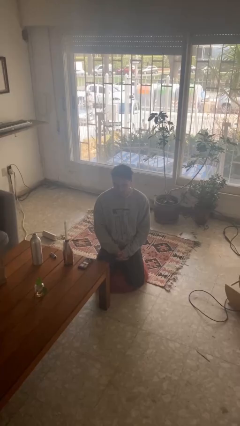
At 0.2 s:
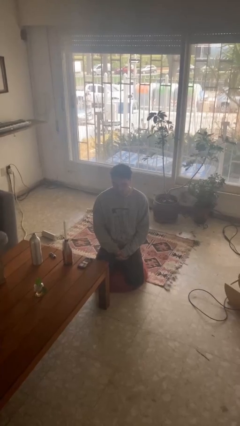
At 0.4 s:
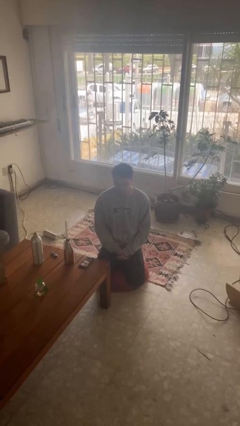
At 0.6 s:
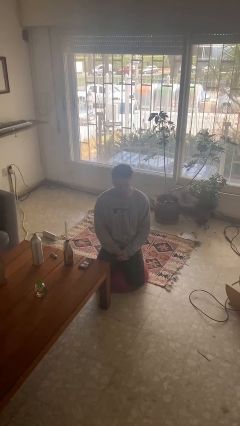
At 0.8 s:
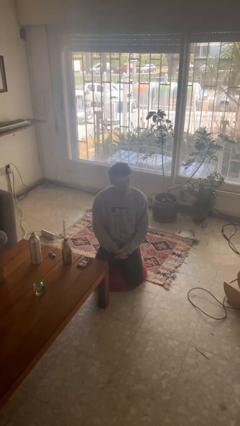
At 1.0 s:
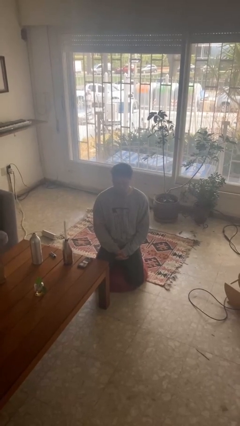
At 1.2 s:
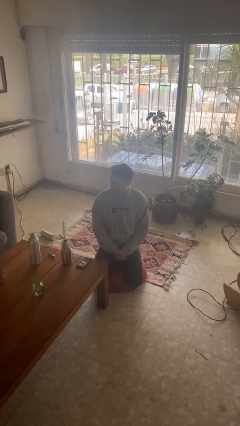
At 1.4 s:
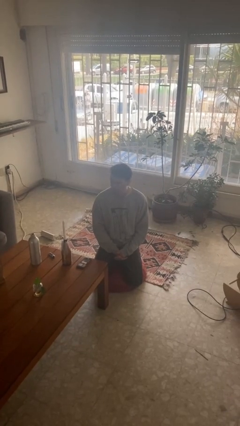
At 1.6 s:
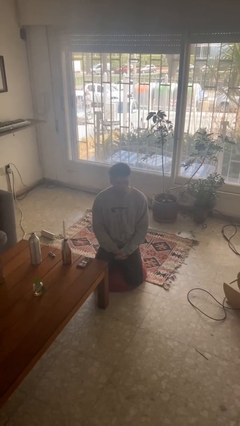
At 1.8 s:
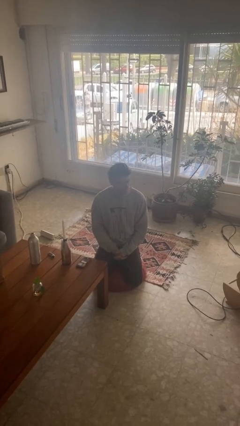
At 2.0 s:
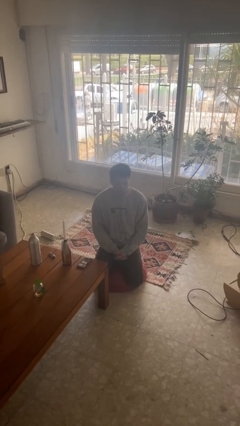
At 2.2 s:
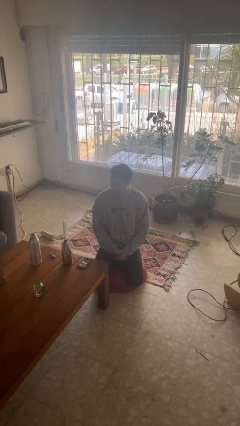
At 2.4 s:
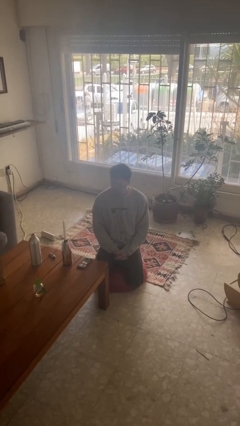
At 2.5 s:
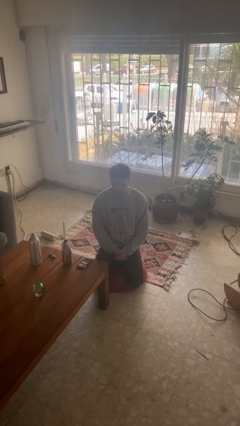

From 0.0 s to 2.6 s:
person shakes head

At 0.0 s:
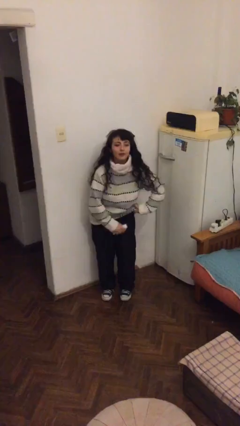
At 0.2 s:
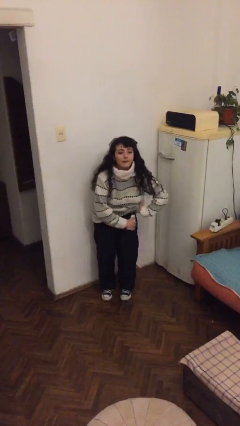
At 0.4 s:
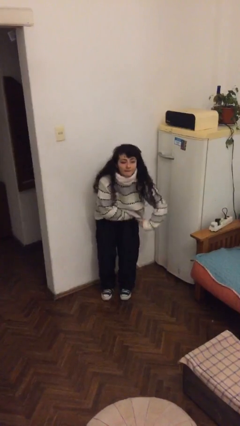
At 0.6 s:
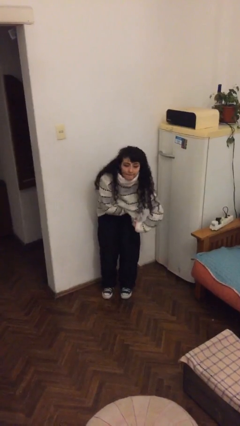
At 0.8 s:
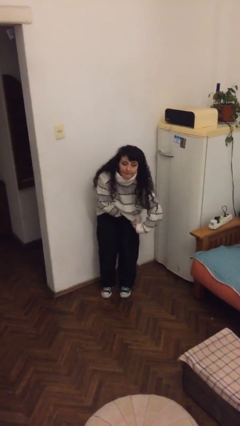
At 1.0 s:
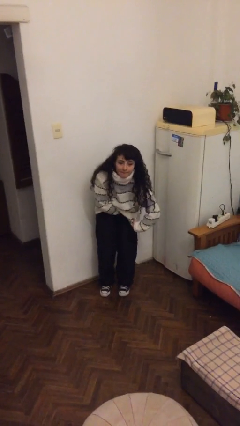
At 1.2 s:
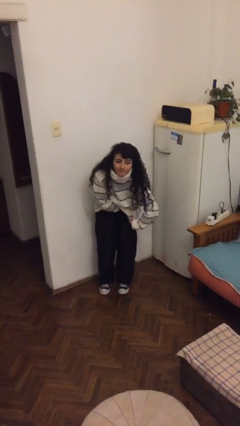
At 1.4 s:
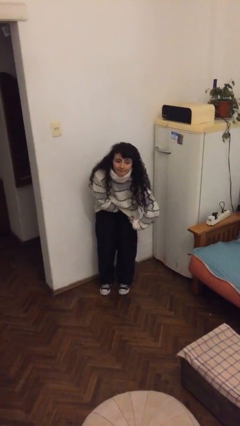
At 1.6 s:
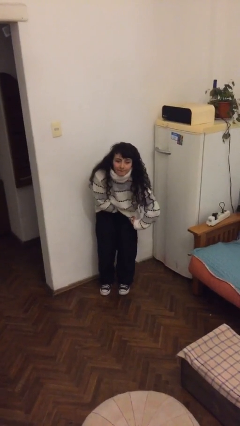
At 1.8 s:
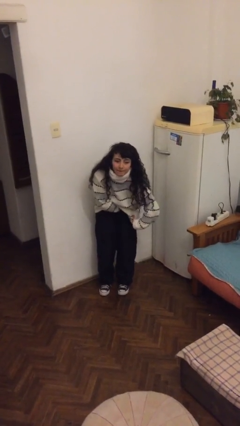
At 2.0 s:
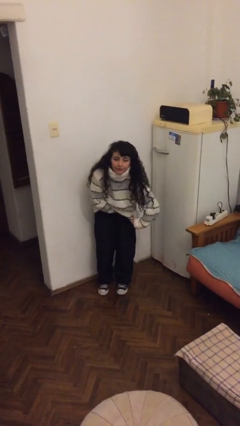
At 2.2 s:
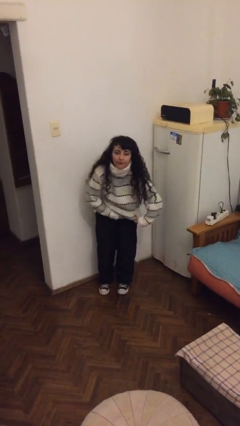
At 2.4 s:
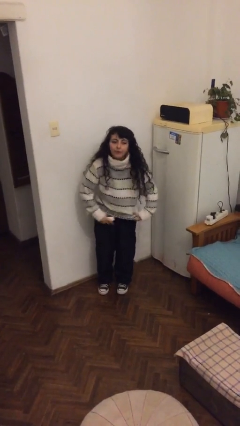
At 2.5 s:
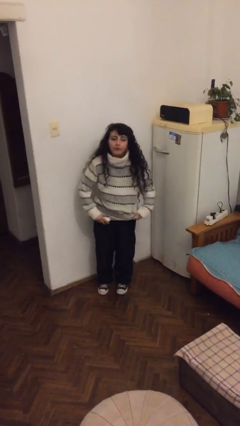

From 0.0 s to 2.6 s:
person applies deodorant

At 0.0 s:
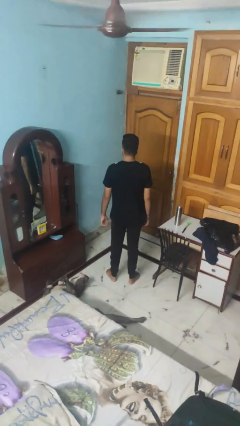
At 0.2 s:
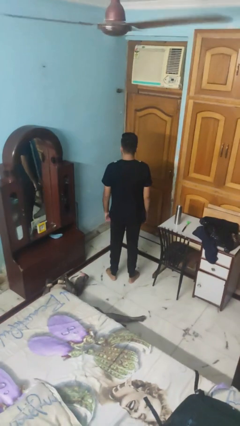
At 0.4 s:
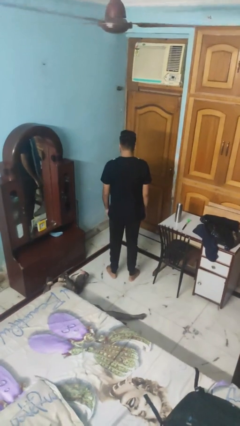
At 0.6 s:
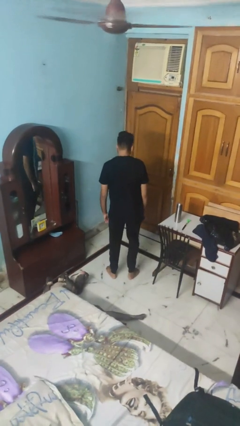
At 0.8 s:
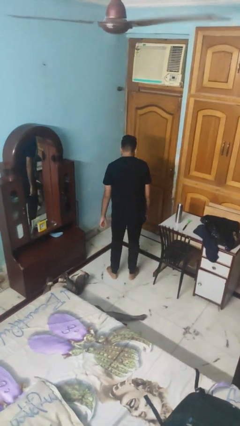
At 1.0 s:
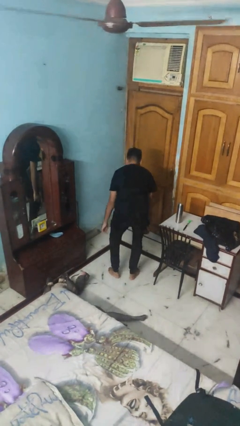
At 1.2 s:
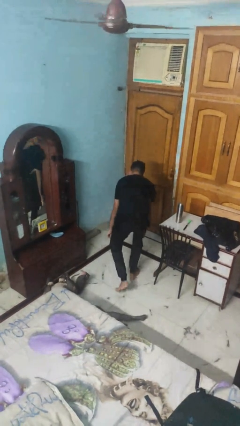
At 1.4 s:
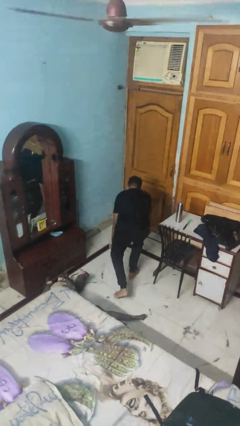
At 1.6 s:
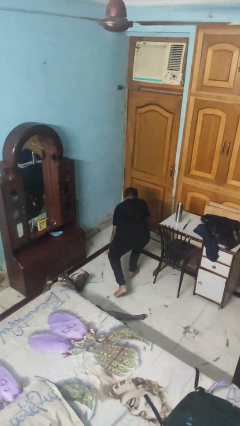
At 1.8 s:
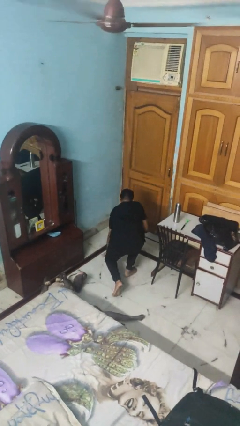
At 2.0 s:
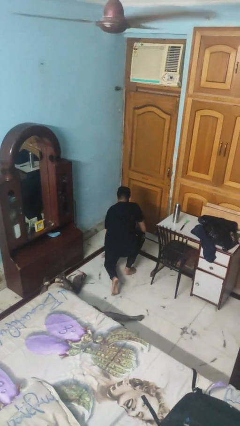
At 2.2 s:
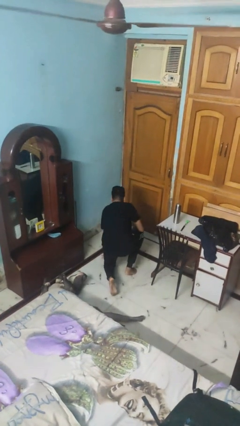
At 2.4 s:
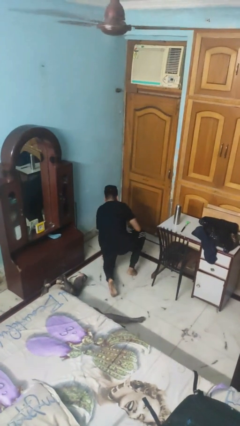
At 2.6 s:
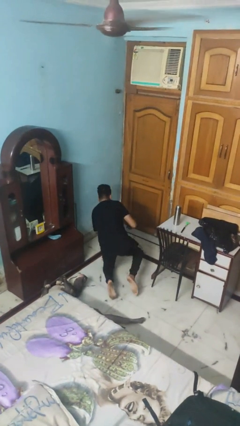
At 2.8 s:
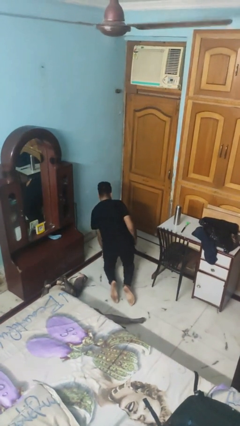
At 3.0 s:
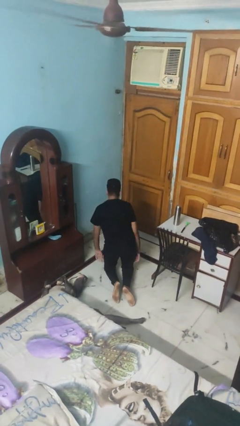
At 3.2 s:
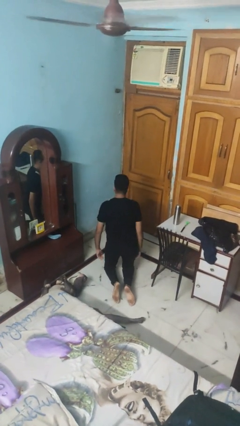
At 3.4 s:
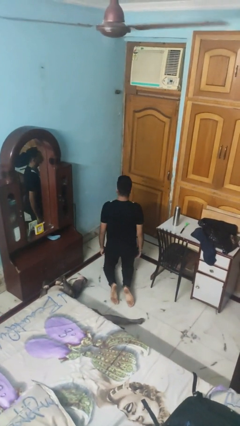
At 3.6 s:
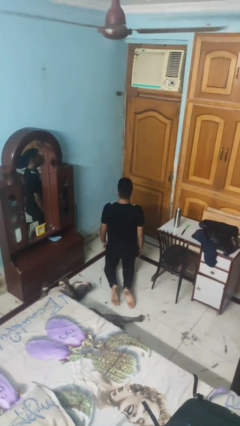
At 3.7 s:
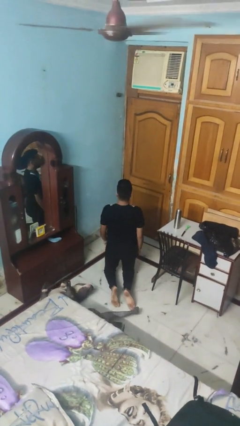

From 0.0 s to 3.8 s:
person kneels

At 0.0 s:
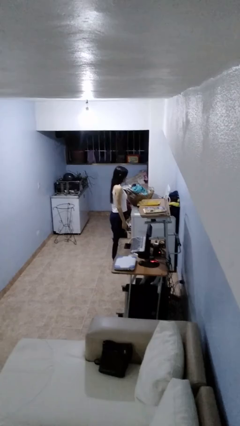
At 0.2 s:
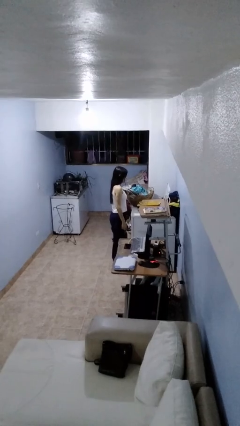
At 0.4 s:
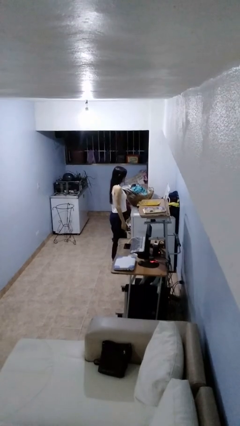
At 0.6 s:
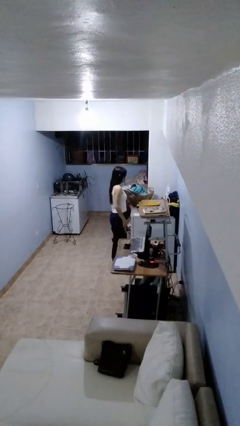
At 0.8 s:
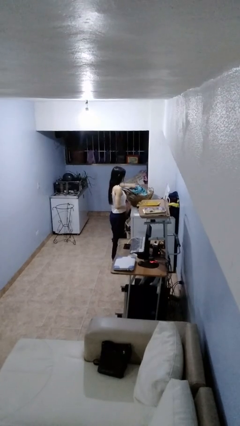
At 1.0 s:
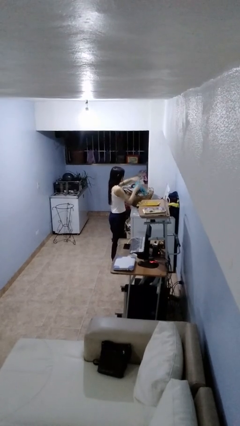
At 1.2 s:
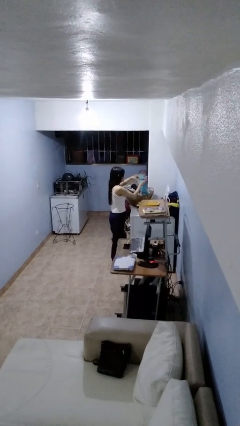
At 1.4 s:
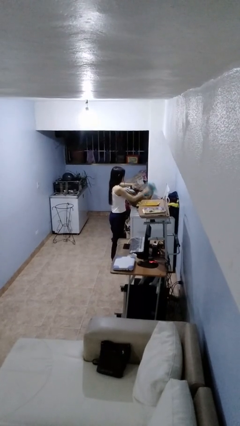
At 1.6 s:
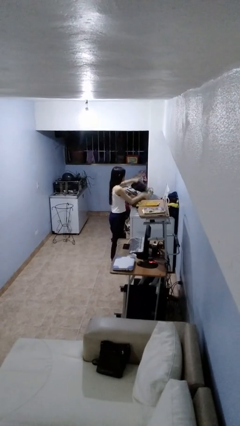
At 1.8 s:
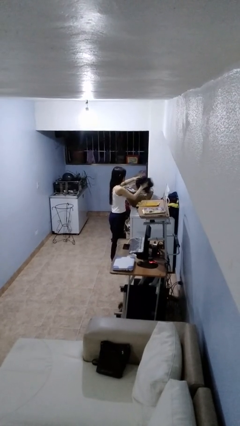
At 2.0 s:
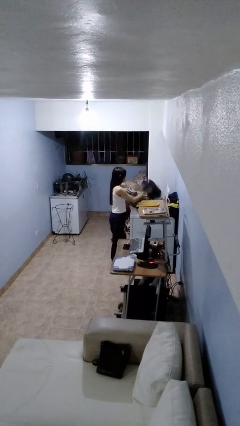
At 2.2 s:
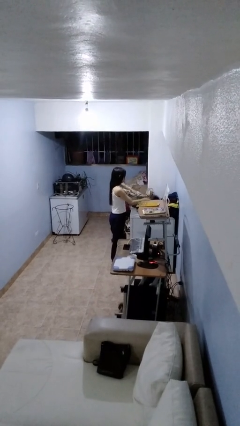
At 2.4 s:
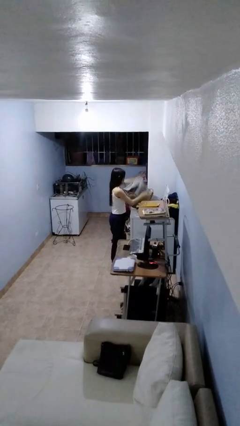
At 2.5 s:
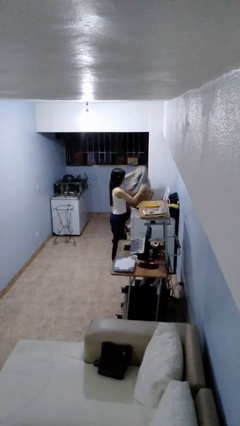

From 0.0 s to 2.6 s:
person loads clotheswasher

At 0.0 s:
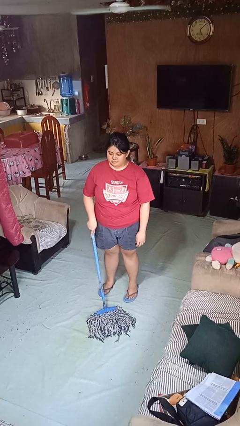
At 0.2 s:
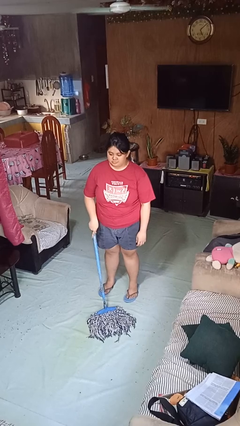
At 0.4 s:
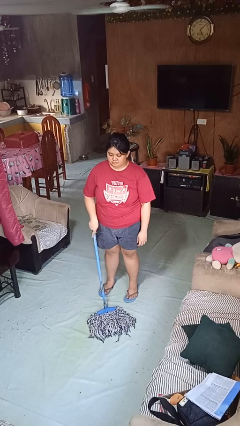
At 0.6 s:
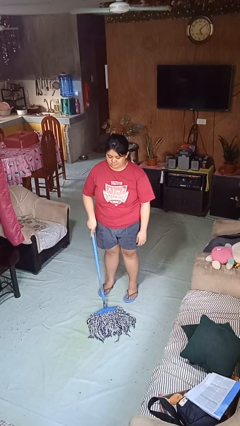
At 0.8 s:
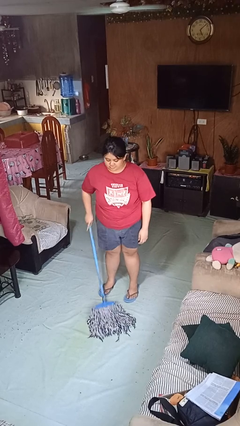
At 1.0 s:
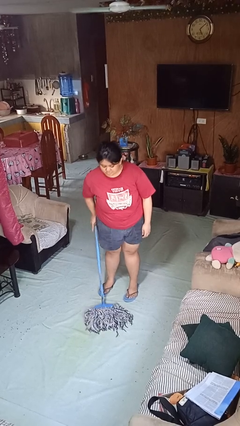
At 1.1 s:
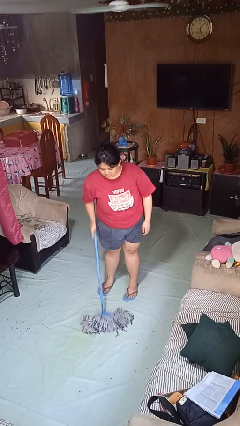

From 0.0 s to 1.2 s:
person mops

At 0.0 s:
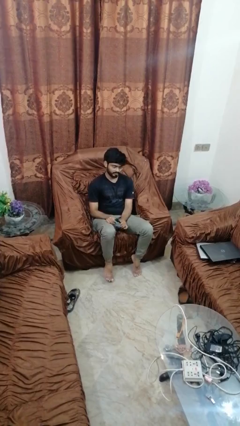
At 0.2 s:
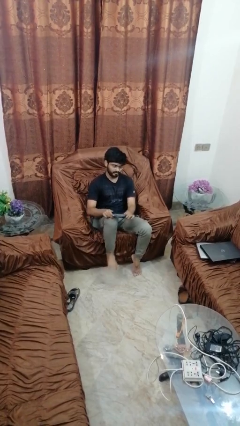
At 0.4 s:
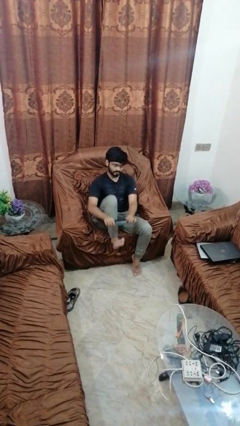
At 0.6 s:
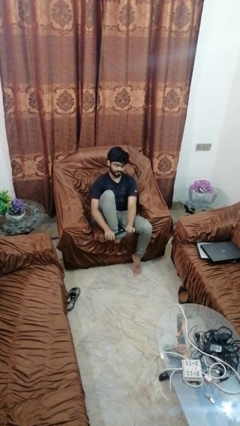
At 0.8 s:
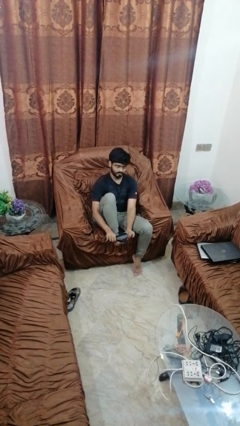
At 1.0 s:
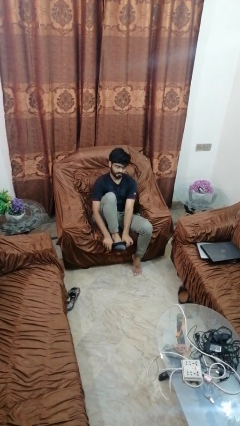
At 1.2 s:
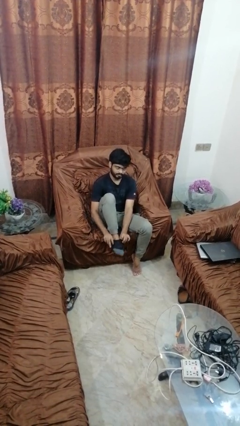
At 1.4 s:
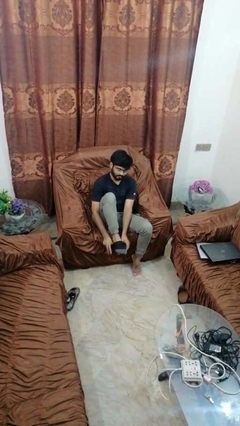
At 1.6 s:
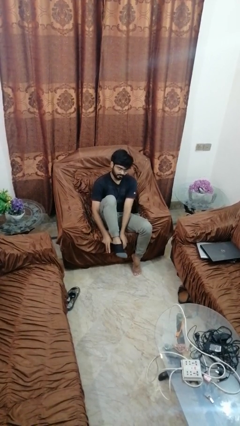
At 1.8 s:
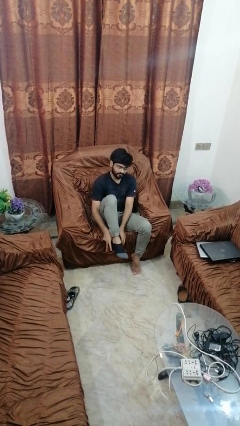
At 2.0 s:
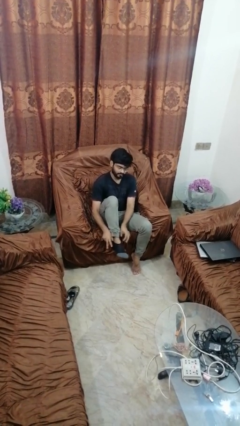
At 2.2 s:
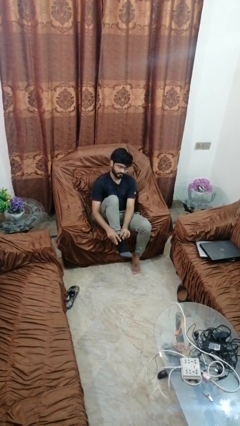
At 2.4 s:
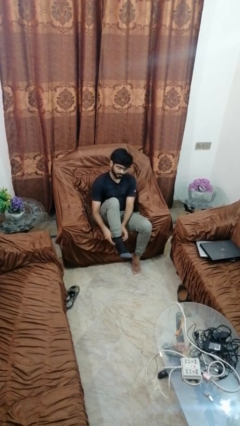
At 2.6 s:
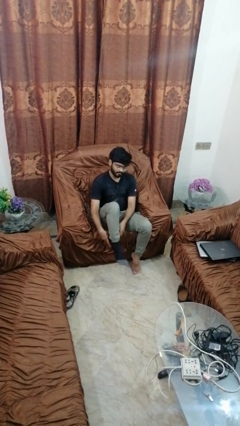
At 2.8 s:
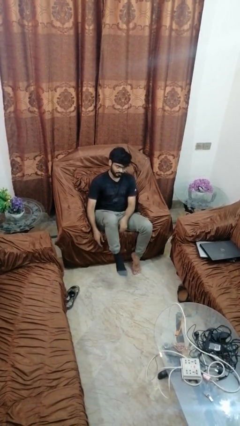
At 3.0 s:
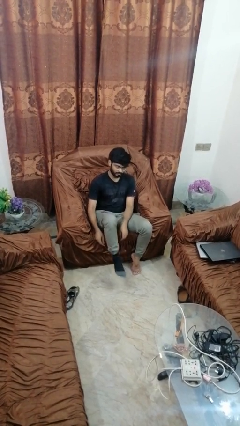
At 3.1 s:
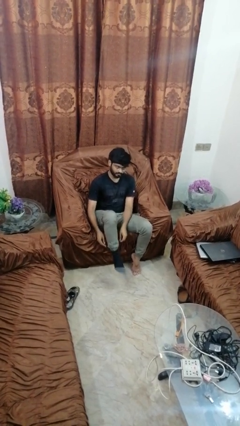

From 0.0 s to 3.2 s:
person puts on socks

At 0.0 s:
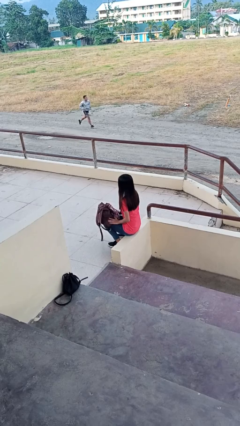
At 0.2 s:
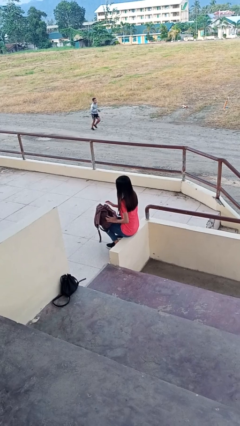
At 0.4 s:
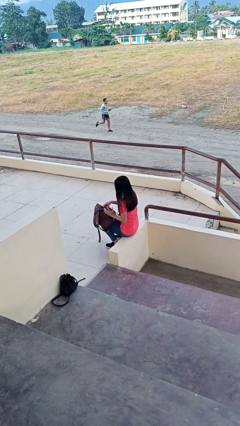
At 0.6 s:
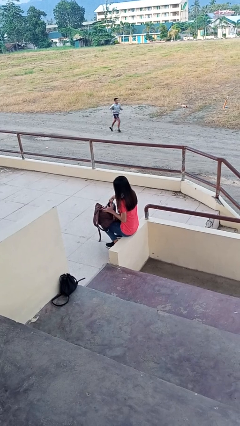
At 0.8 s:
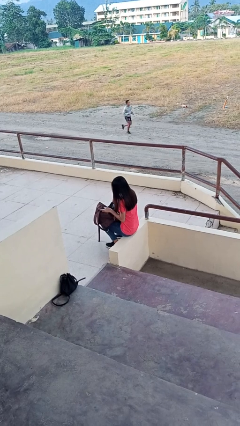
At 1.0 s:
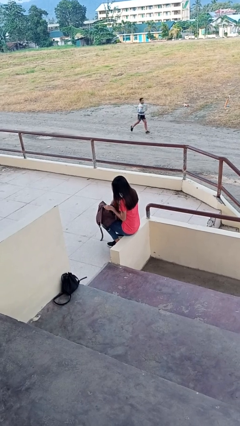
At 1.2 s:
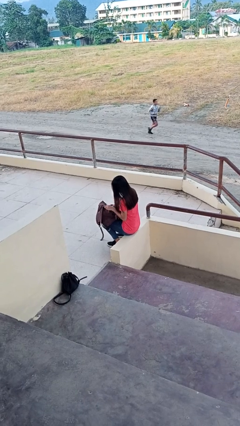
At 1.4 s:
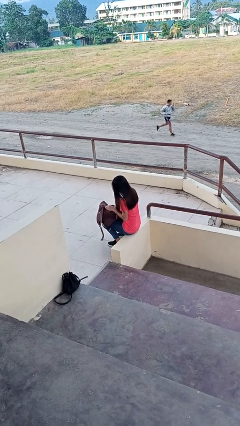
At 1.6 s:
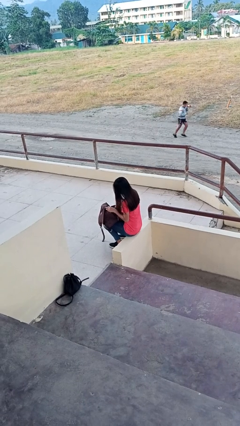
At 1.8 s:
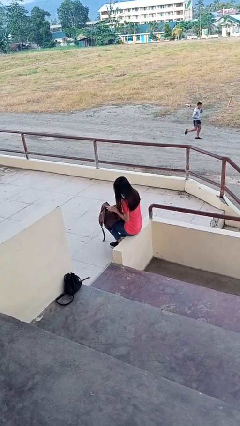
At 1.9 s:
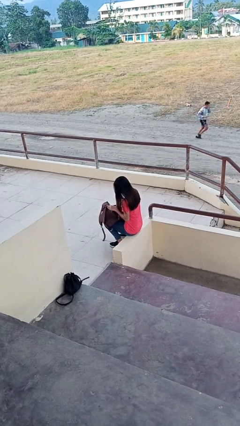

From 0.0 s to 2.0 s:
person searches in backpack
